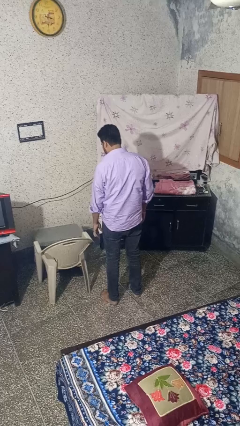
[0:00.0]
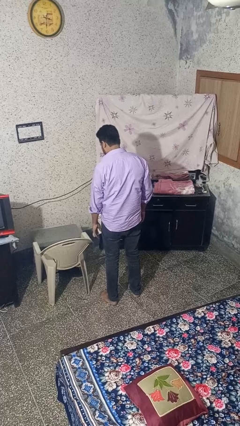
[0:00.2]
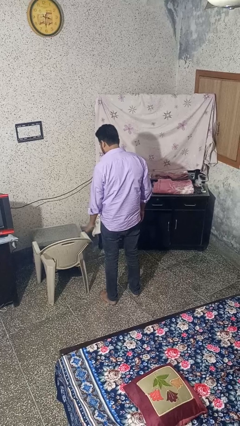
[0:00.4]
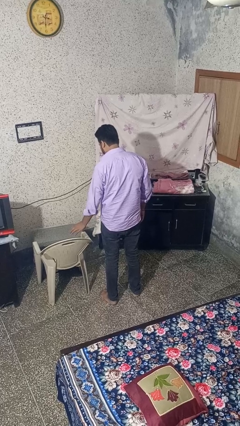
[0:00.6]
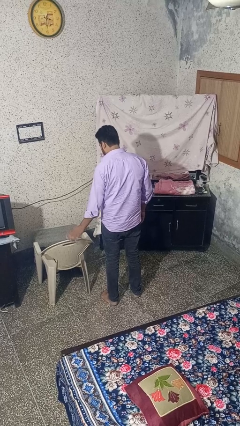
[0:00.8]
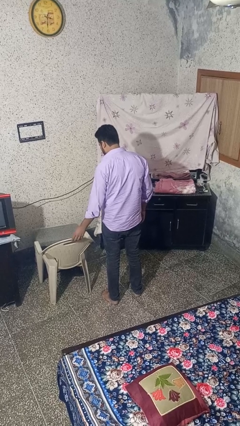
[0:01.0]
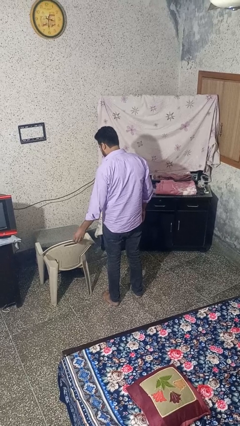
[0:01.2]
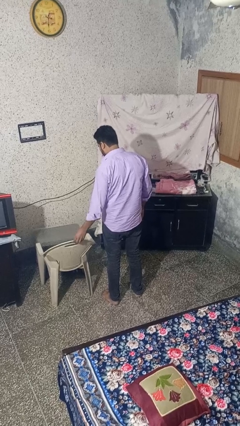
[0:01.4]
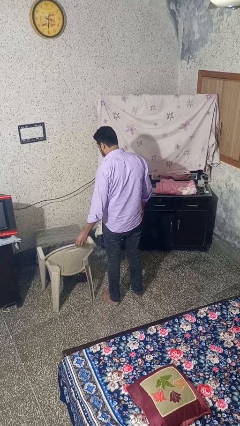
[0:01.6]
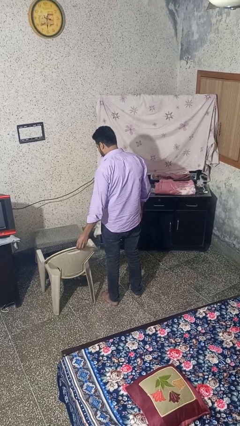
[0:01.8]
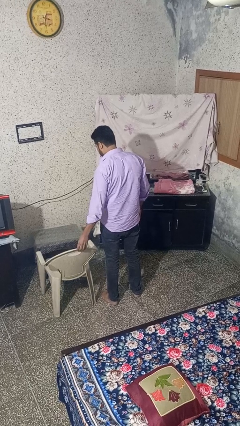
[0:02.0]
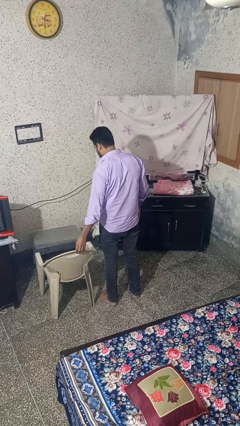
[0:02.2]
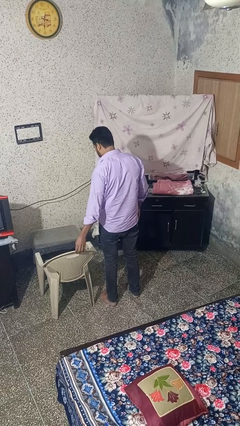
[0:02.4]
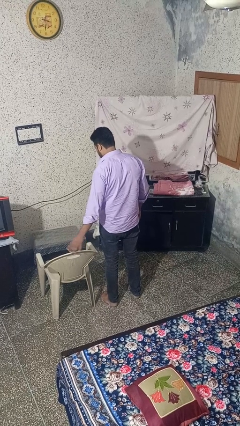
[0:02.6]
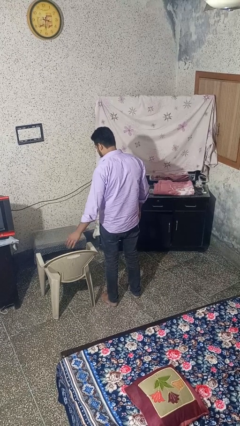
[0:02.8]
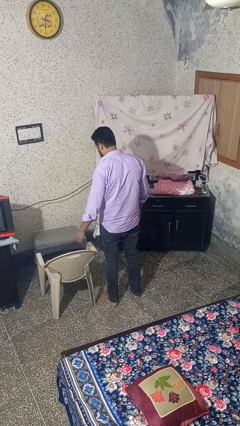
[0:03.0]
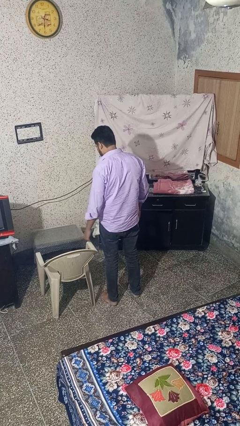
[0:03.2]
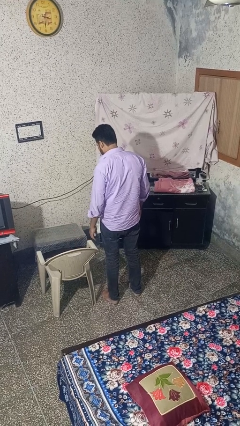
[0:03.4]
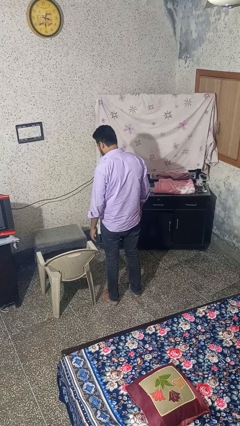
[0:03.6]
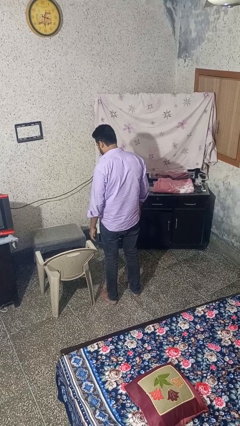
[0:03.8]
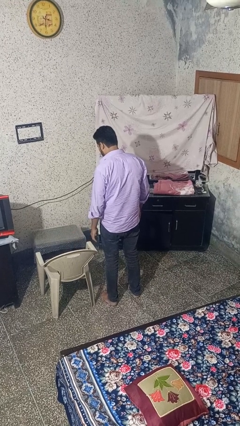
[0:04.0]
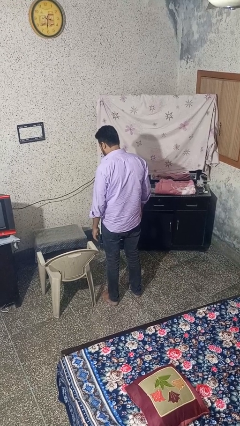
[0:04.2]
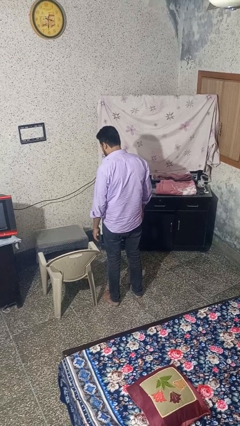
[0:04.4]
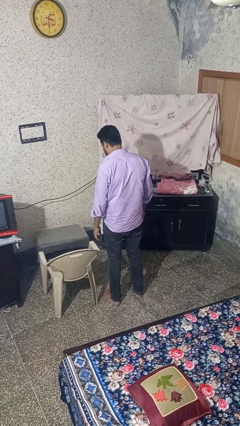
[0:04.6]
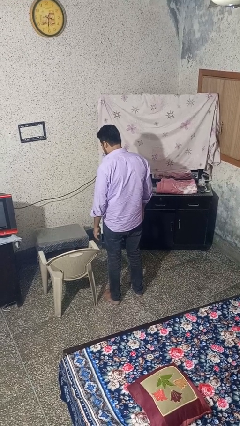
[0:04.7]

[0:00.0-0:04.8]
person pulls out chair

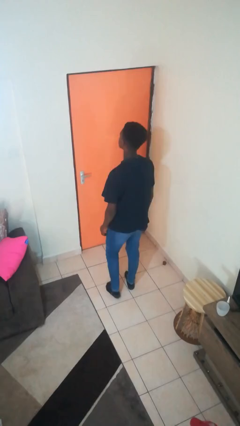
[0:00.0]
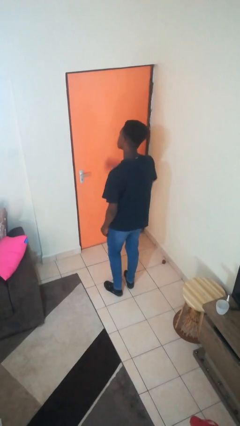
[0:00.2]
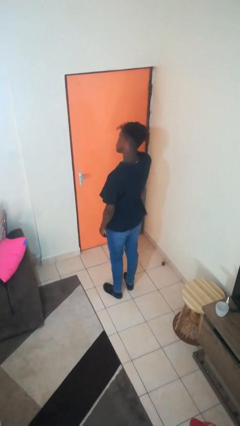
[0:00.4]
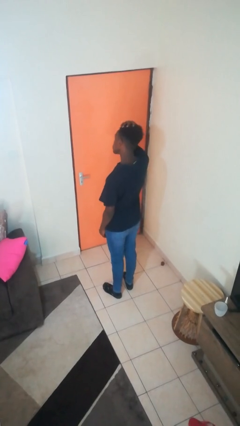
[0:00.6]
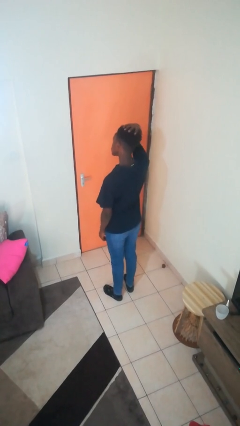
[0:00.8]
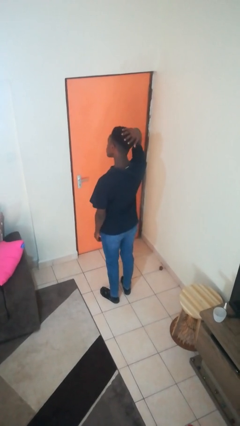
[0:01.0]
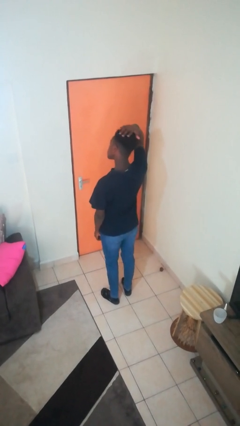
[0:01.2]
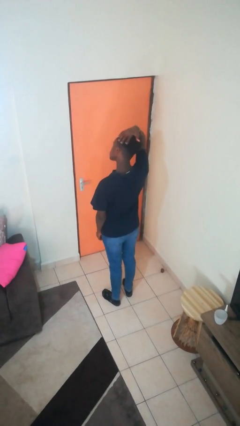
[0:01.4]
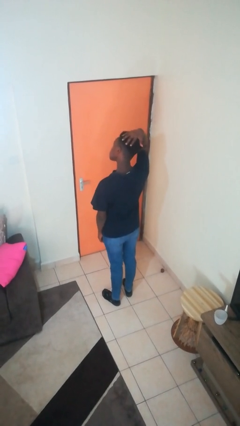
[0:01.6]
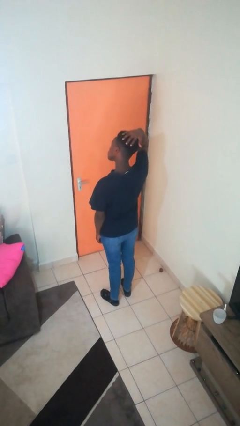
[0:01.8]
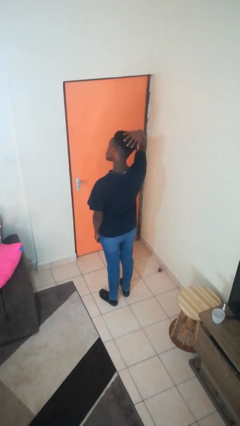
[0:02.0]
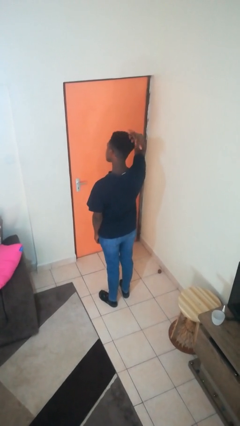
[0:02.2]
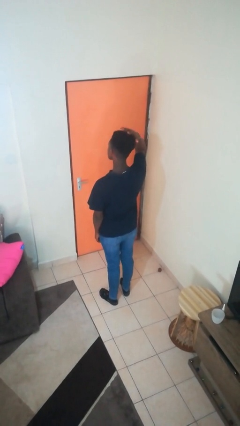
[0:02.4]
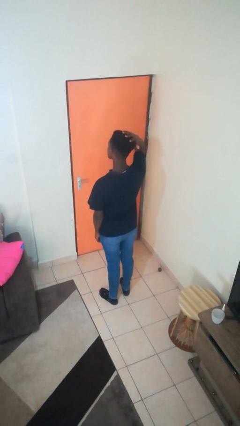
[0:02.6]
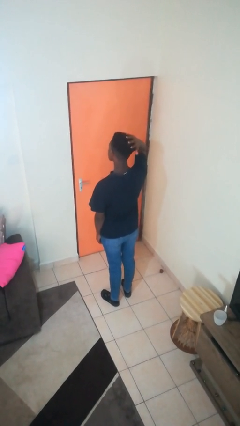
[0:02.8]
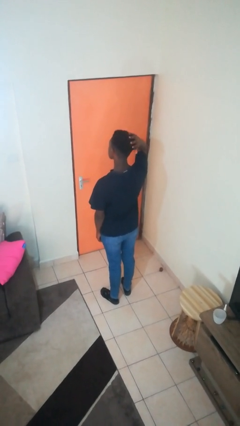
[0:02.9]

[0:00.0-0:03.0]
person strokes hair

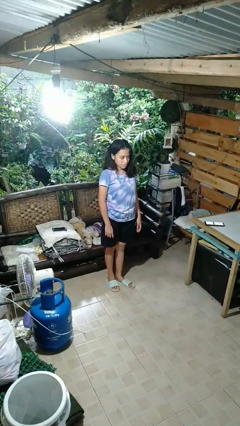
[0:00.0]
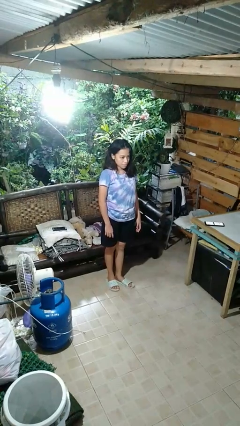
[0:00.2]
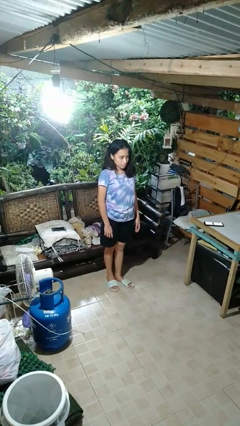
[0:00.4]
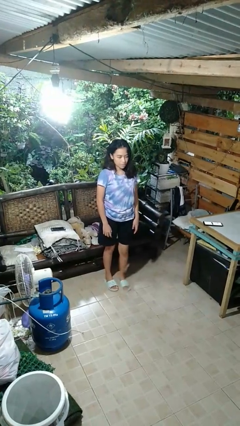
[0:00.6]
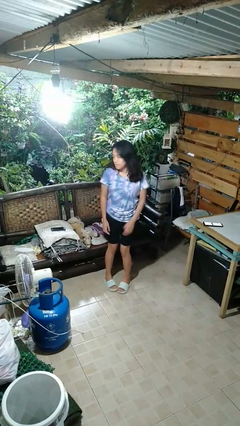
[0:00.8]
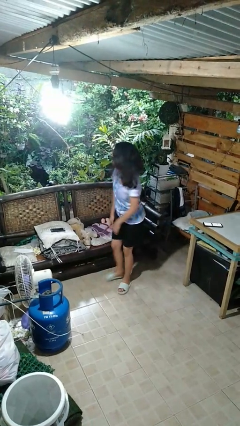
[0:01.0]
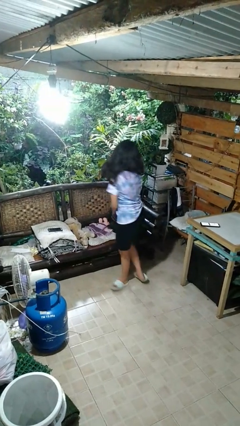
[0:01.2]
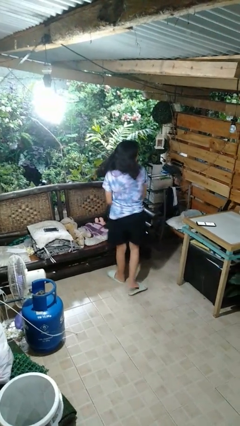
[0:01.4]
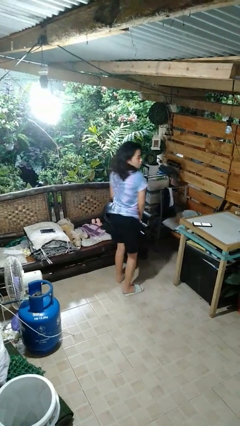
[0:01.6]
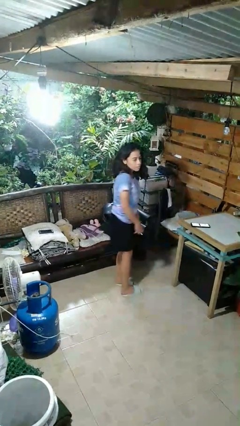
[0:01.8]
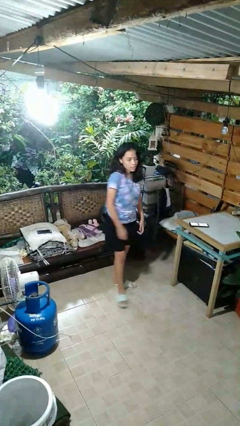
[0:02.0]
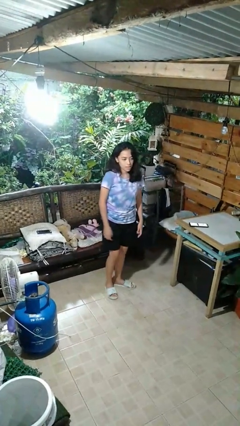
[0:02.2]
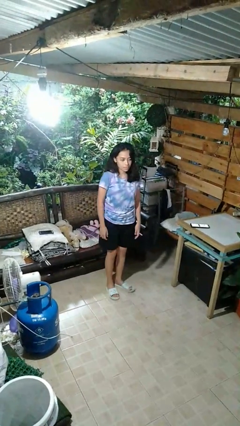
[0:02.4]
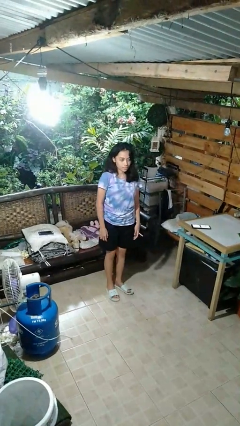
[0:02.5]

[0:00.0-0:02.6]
person twirls

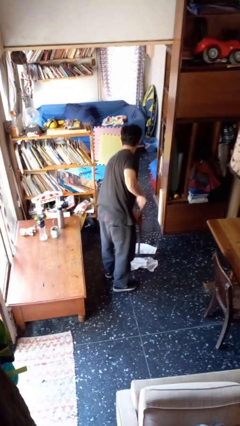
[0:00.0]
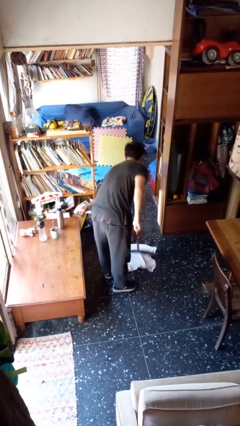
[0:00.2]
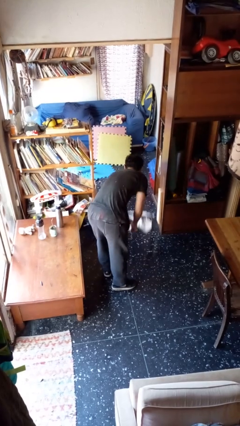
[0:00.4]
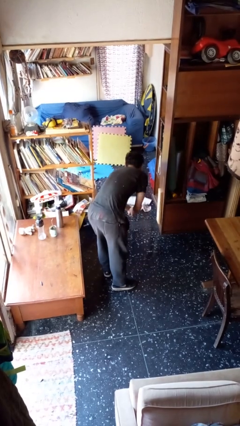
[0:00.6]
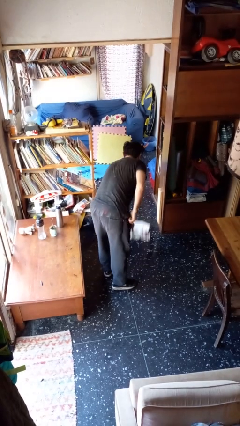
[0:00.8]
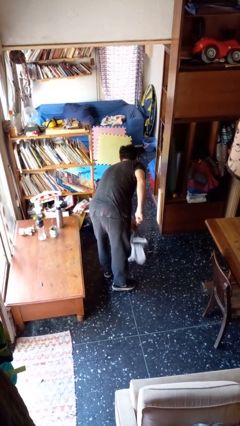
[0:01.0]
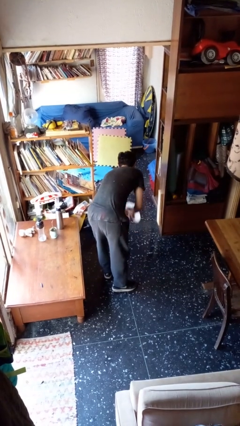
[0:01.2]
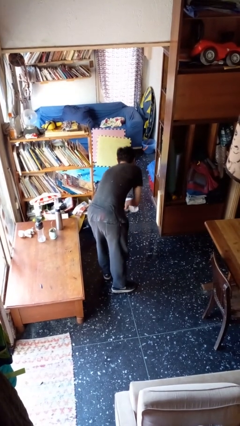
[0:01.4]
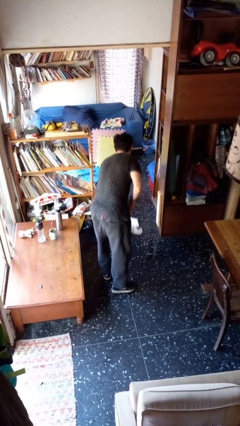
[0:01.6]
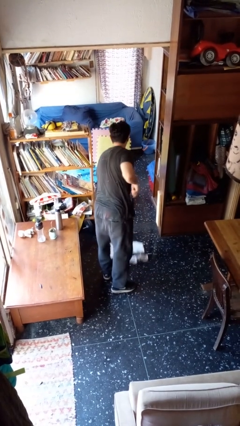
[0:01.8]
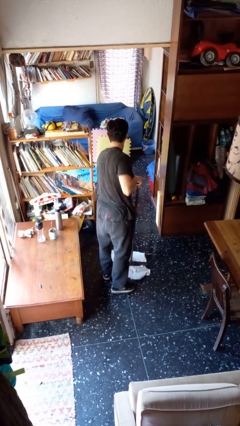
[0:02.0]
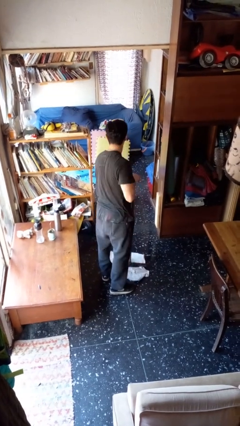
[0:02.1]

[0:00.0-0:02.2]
person mops

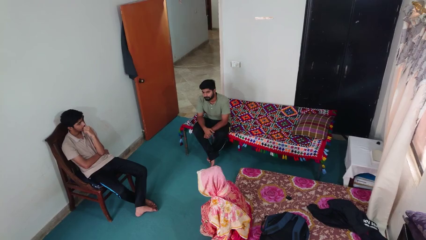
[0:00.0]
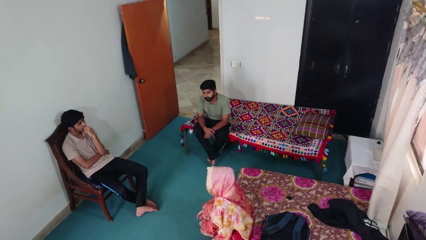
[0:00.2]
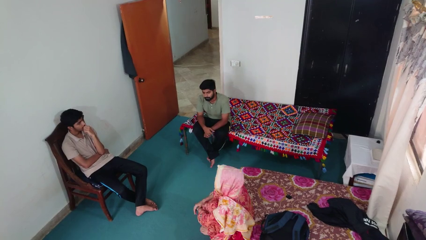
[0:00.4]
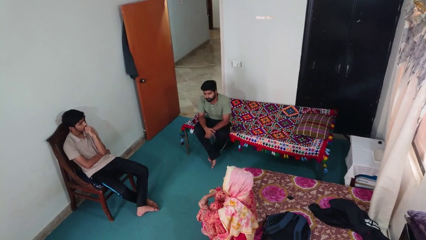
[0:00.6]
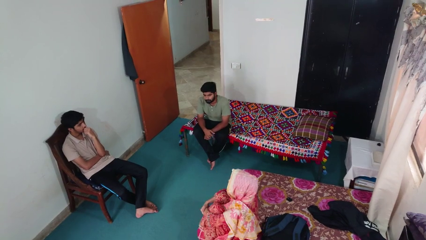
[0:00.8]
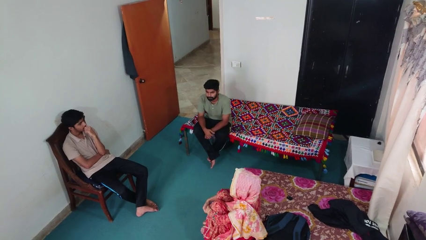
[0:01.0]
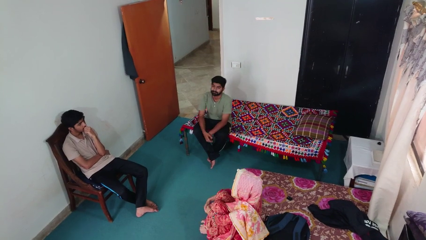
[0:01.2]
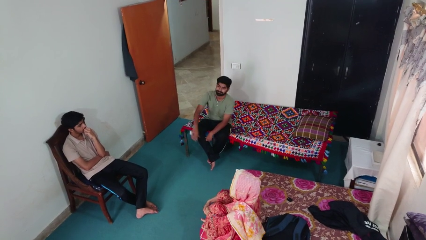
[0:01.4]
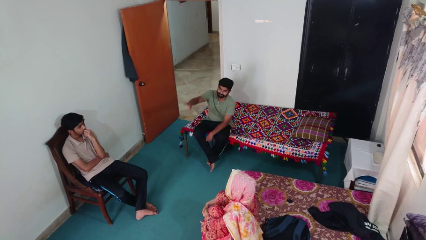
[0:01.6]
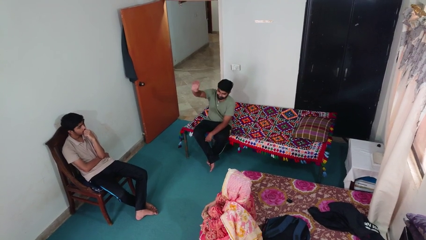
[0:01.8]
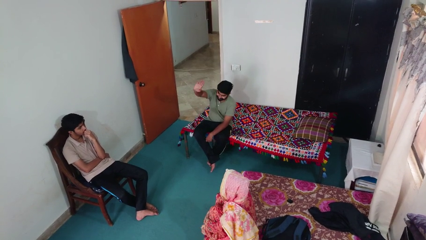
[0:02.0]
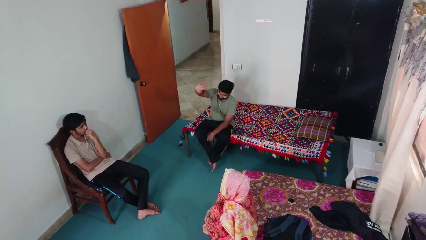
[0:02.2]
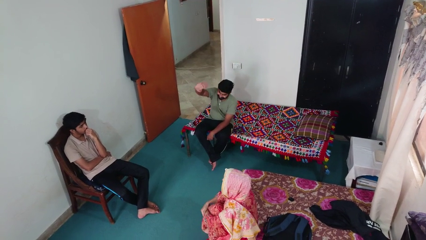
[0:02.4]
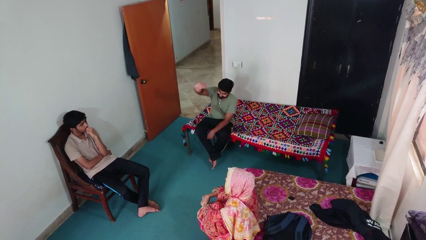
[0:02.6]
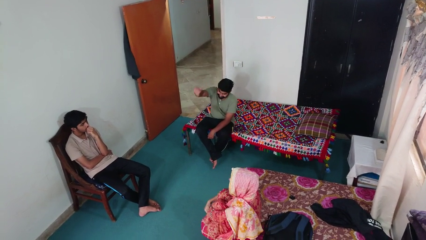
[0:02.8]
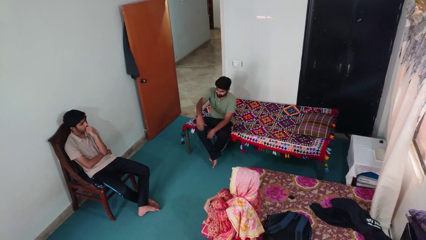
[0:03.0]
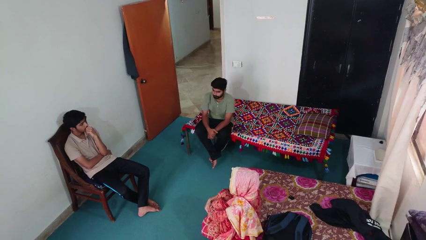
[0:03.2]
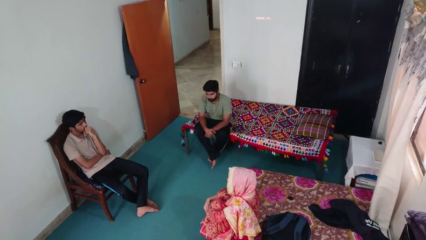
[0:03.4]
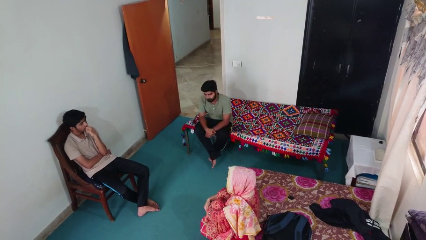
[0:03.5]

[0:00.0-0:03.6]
person waves at person

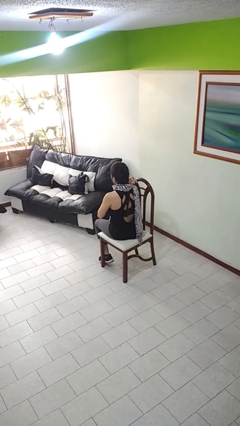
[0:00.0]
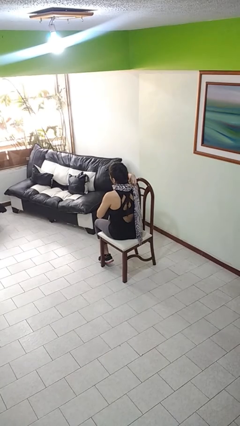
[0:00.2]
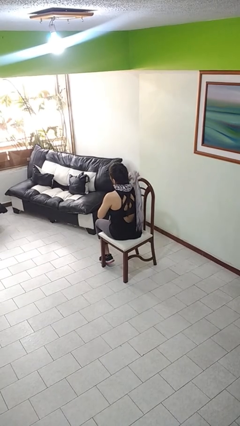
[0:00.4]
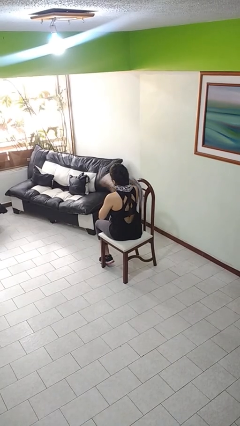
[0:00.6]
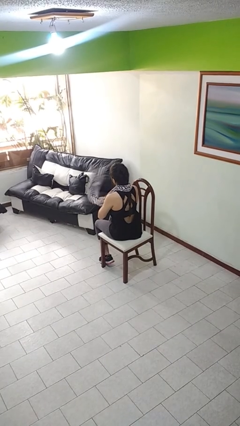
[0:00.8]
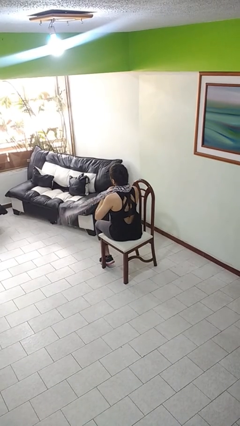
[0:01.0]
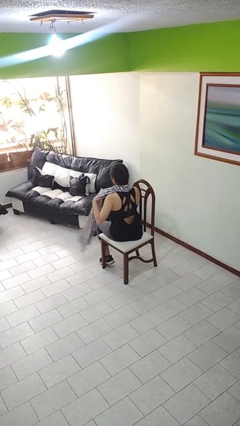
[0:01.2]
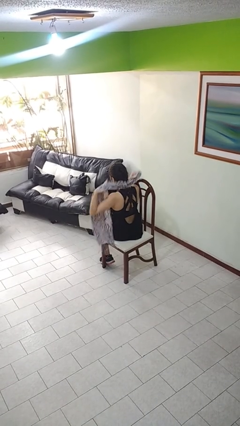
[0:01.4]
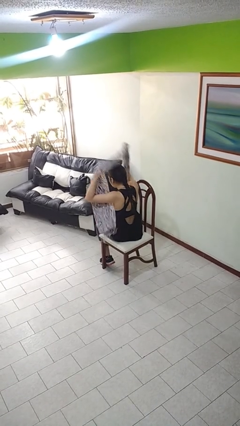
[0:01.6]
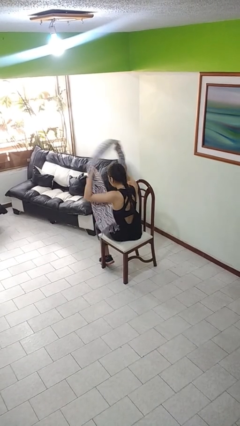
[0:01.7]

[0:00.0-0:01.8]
person takes off scarf
